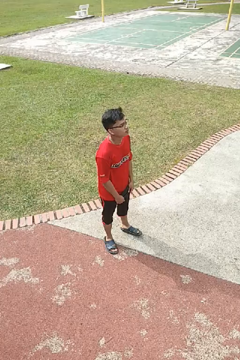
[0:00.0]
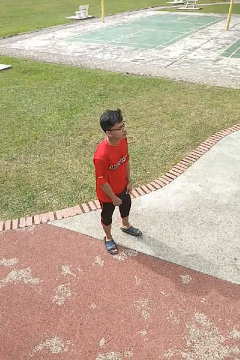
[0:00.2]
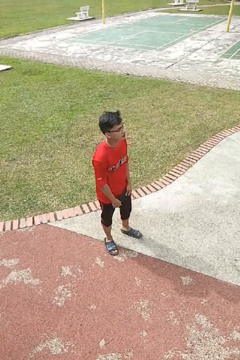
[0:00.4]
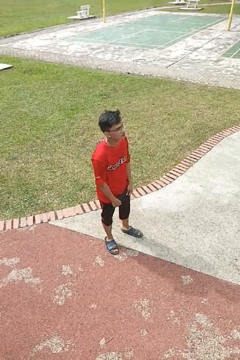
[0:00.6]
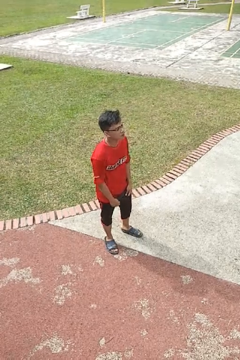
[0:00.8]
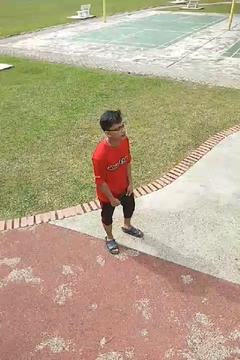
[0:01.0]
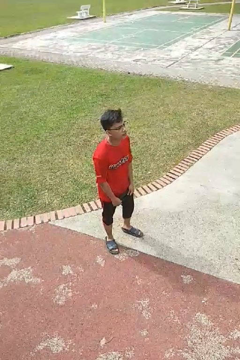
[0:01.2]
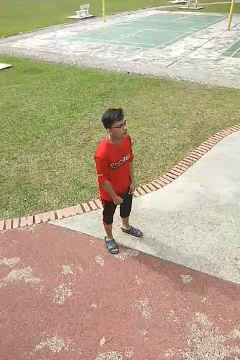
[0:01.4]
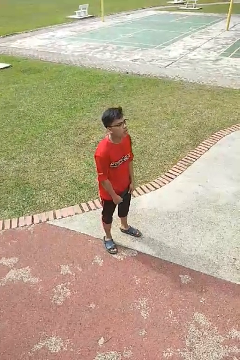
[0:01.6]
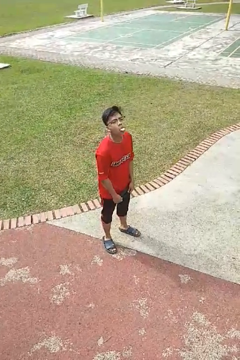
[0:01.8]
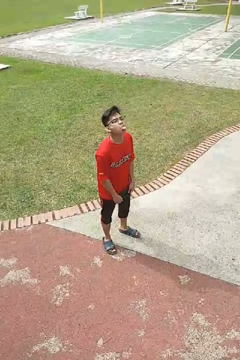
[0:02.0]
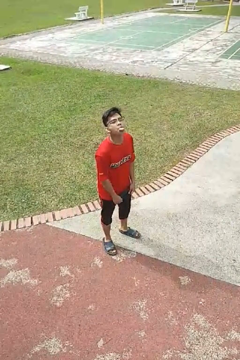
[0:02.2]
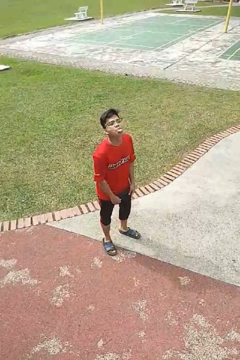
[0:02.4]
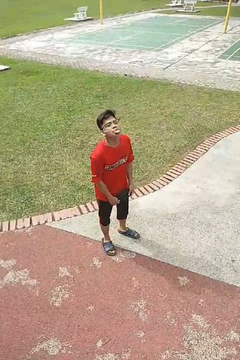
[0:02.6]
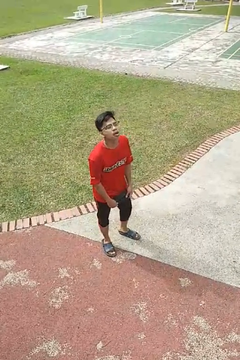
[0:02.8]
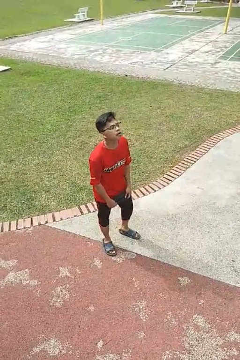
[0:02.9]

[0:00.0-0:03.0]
person sticks out tongue

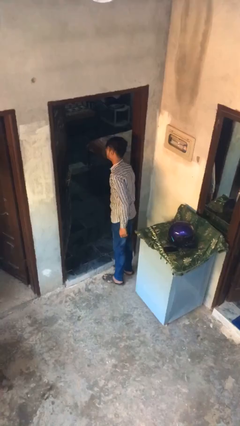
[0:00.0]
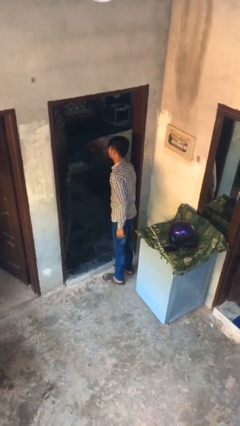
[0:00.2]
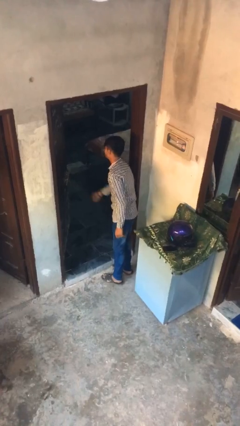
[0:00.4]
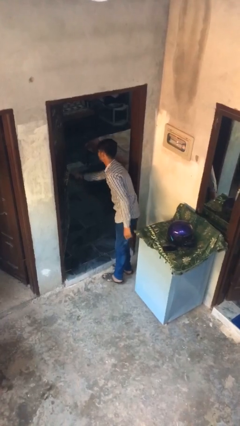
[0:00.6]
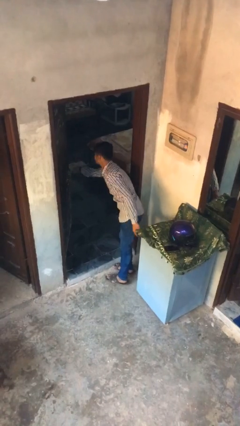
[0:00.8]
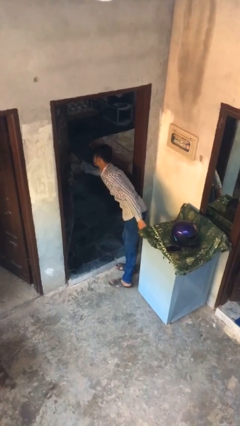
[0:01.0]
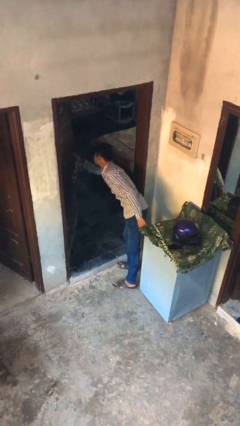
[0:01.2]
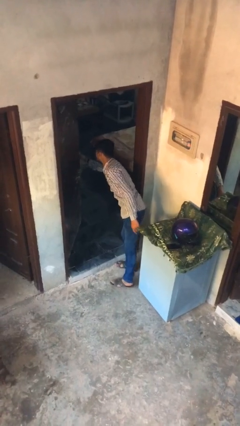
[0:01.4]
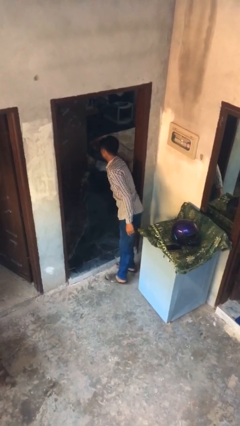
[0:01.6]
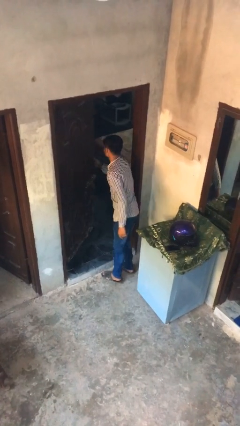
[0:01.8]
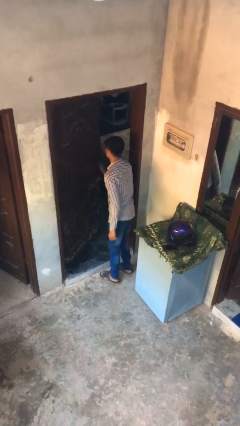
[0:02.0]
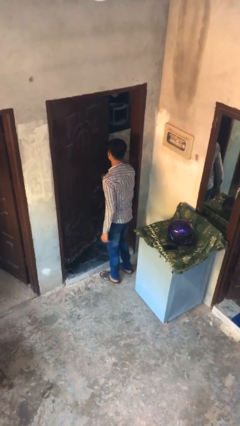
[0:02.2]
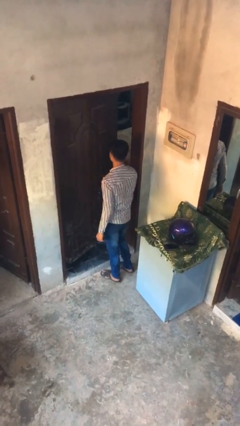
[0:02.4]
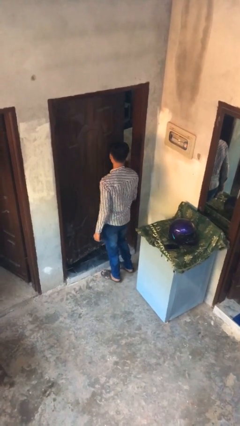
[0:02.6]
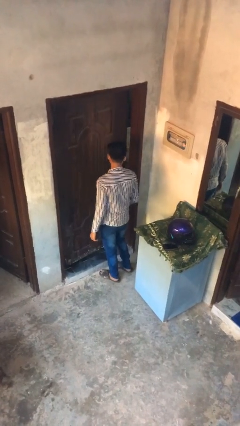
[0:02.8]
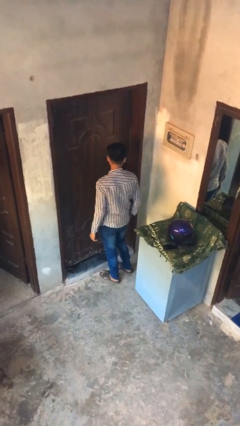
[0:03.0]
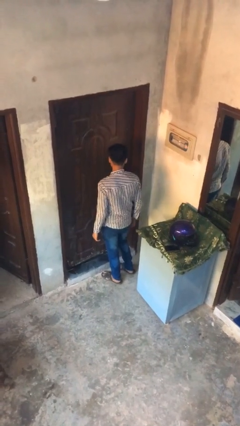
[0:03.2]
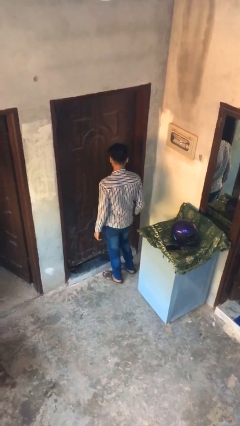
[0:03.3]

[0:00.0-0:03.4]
person closes facility door

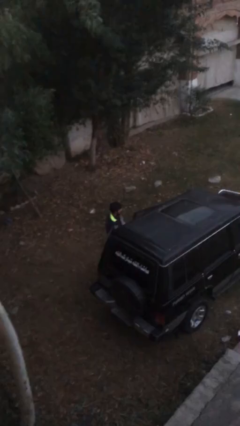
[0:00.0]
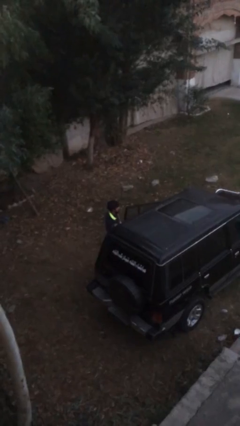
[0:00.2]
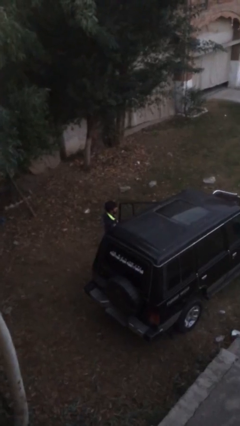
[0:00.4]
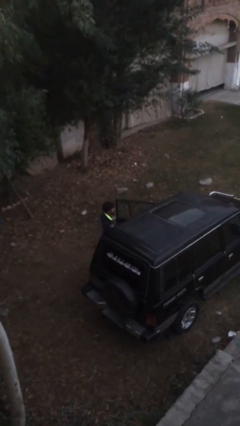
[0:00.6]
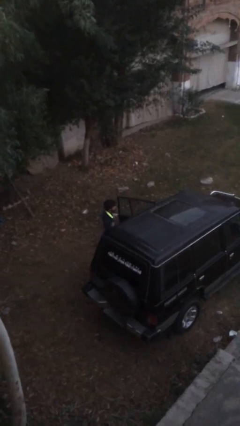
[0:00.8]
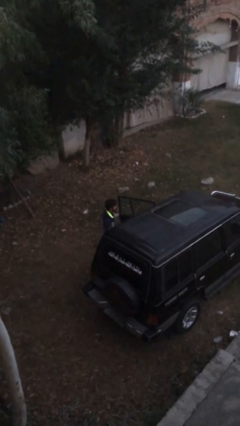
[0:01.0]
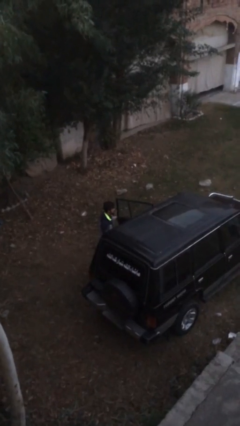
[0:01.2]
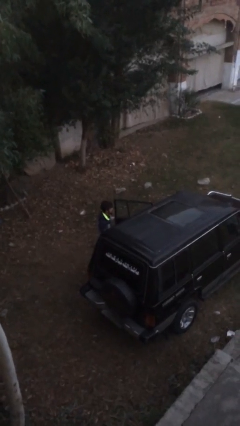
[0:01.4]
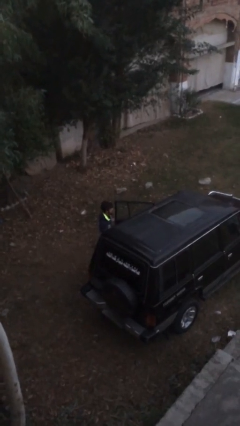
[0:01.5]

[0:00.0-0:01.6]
person opens car door

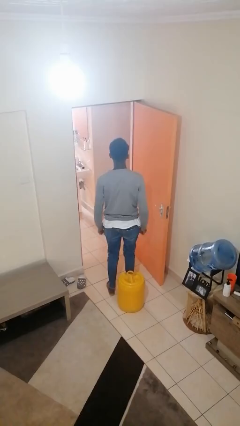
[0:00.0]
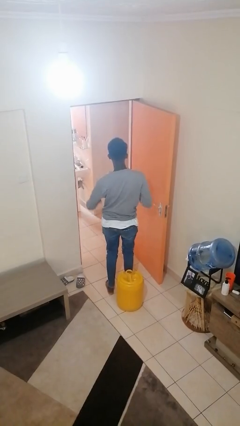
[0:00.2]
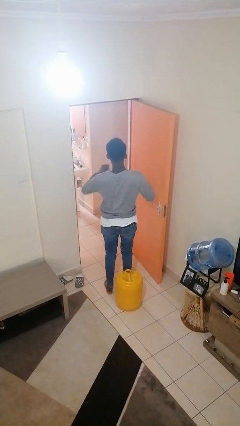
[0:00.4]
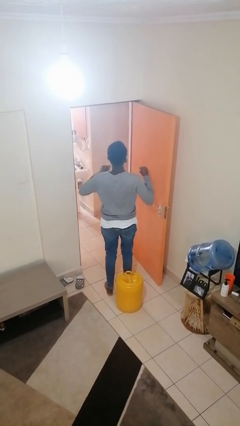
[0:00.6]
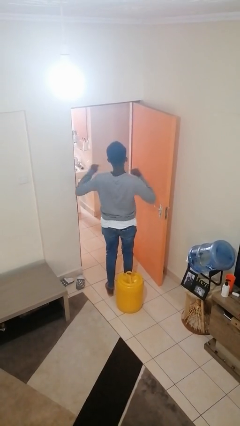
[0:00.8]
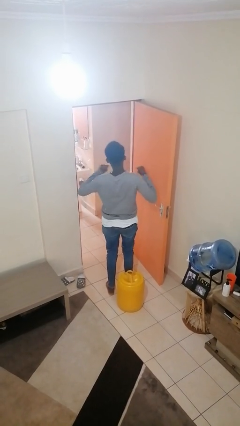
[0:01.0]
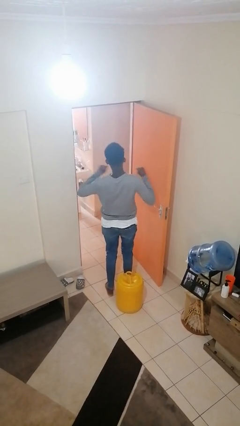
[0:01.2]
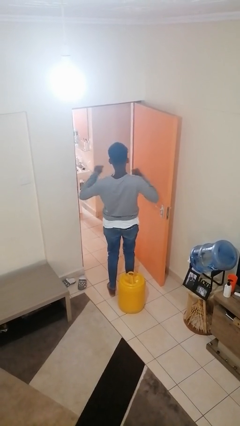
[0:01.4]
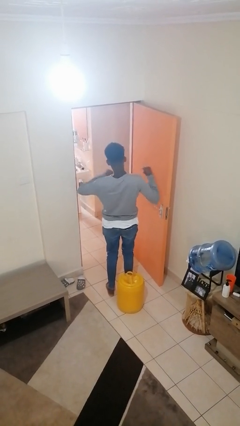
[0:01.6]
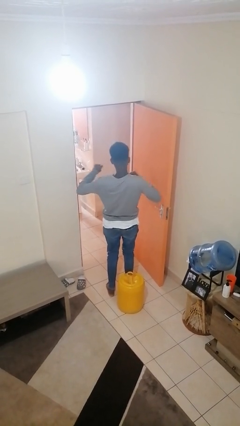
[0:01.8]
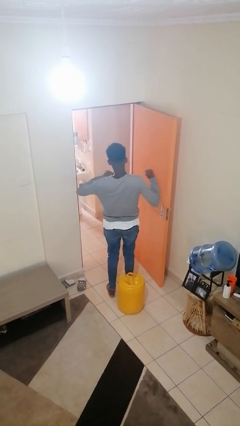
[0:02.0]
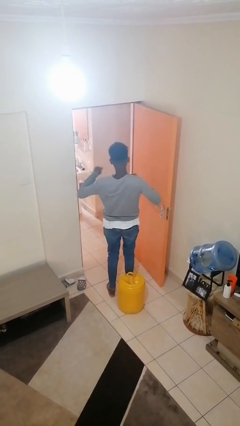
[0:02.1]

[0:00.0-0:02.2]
person drums on chest

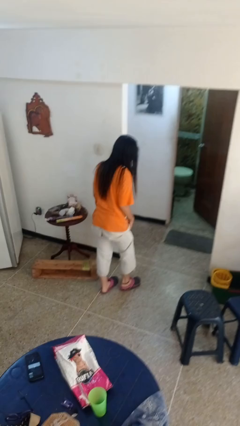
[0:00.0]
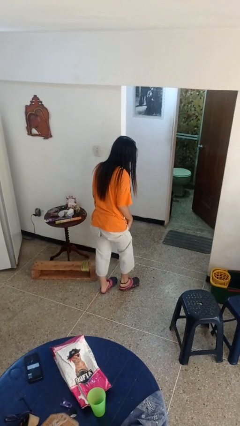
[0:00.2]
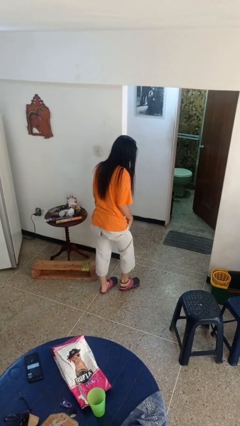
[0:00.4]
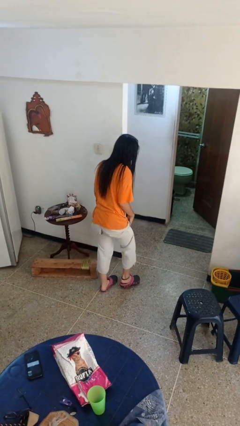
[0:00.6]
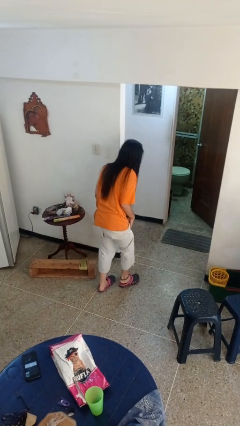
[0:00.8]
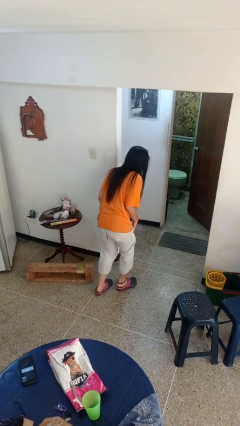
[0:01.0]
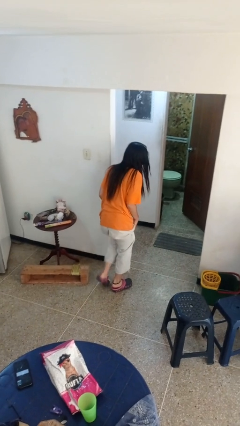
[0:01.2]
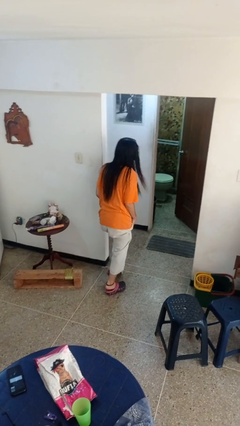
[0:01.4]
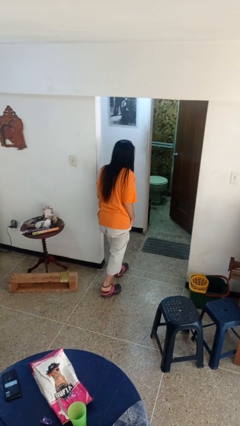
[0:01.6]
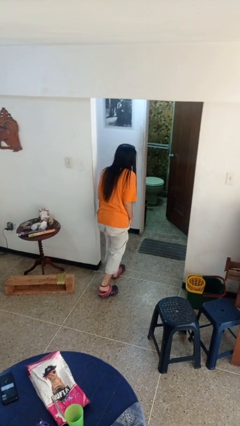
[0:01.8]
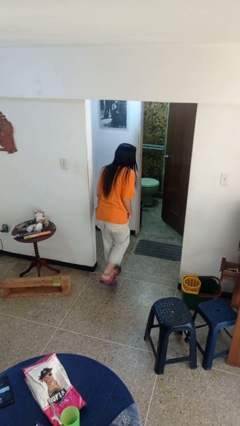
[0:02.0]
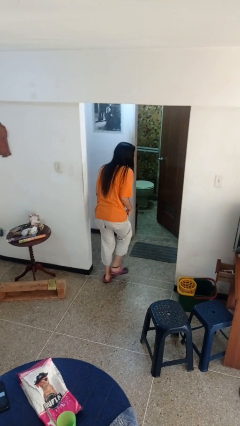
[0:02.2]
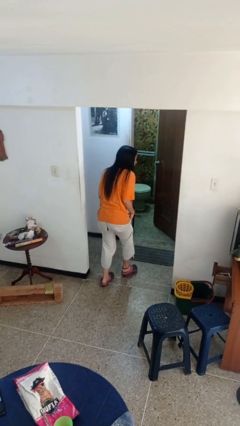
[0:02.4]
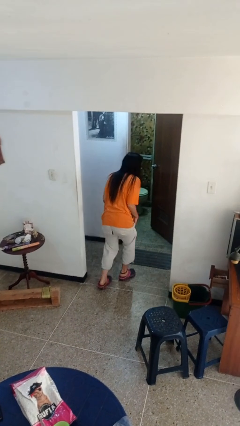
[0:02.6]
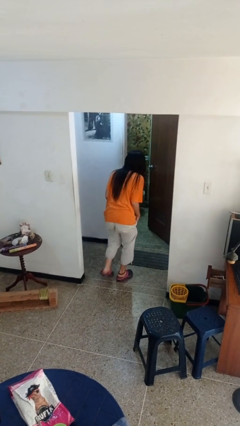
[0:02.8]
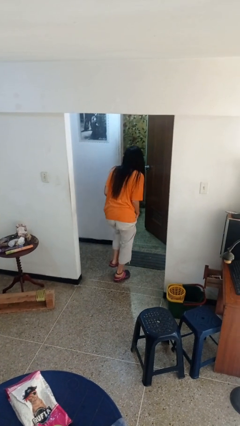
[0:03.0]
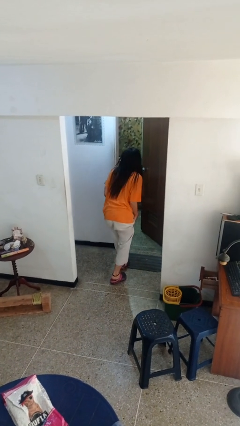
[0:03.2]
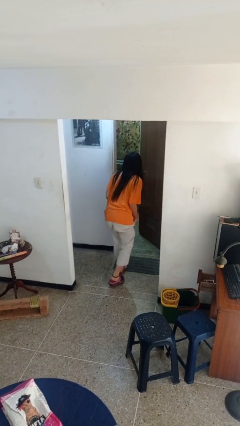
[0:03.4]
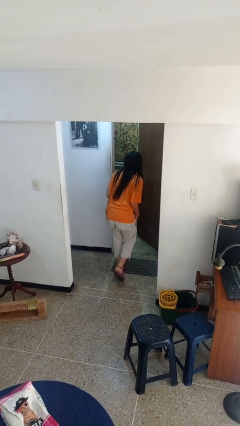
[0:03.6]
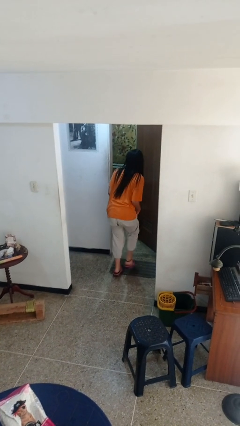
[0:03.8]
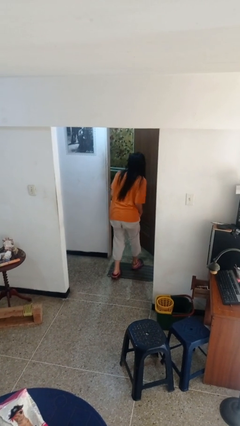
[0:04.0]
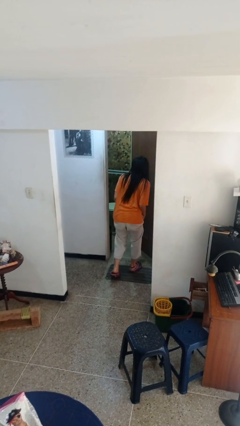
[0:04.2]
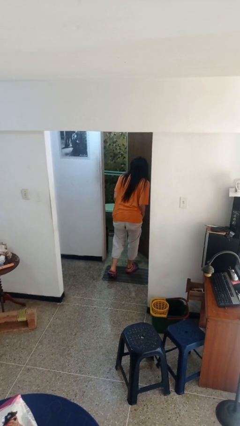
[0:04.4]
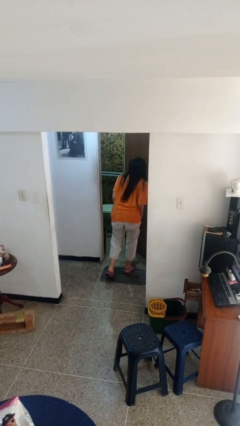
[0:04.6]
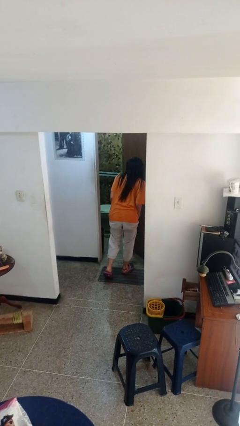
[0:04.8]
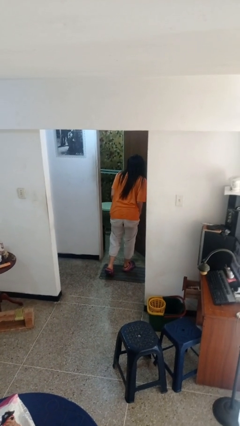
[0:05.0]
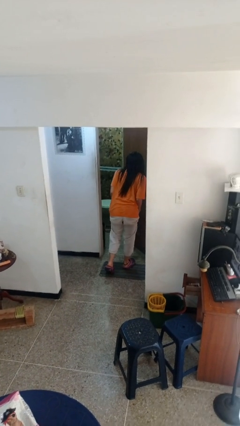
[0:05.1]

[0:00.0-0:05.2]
person walks tiptoe

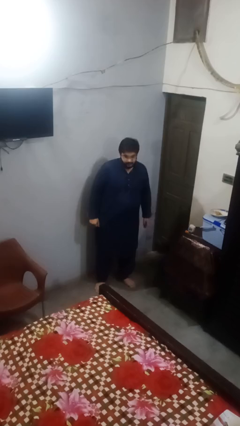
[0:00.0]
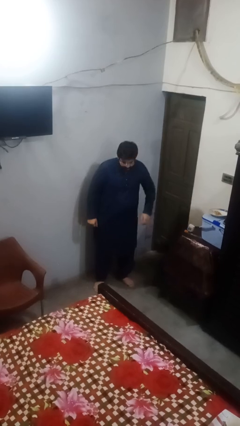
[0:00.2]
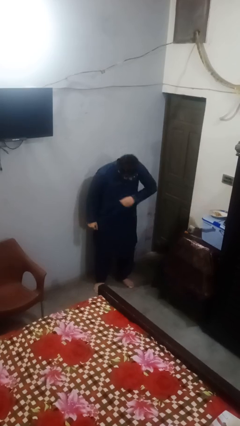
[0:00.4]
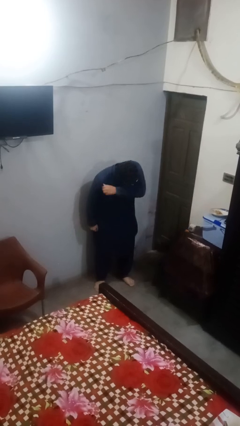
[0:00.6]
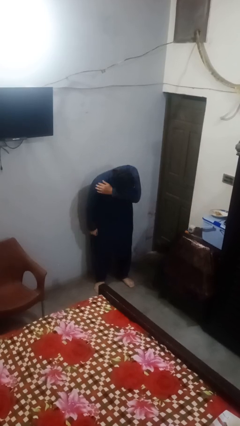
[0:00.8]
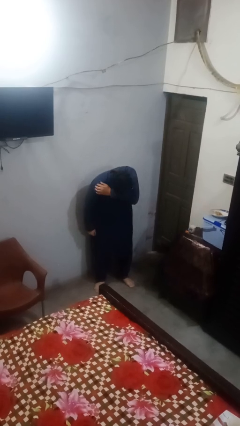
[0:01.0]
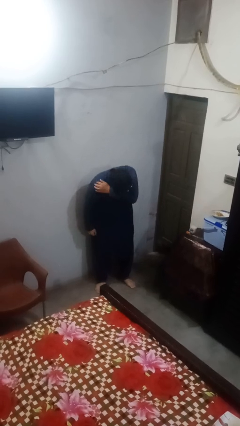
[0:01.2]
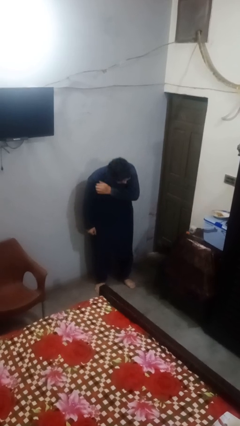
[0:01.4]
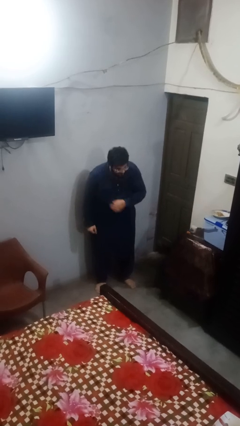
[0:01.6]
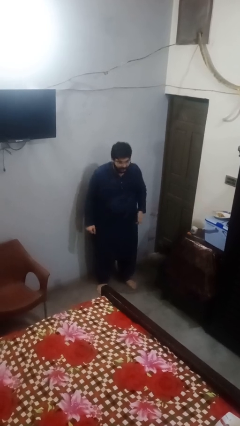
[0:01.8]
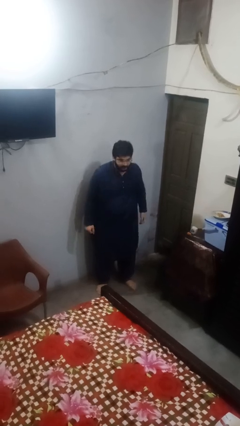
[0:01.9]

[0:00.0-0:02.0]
person sneezes into arm

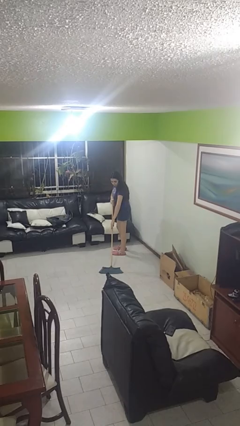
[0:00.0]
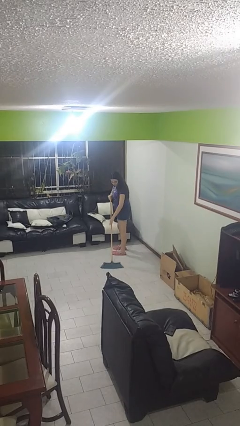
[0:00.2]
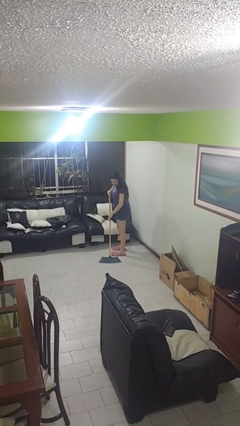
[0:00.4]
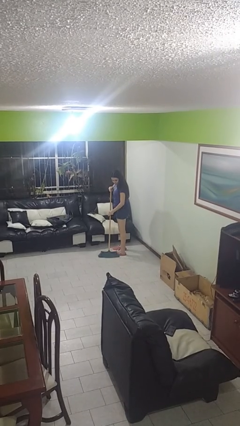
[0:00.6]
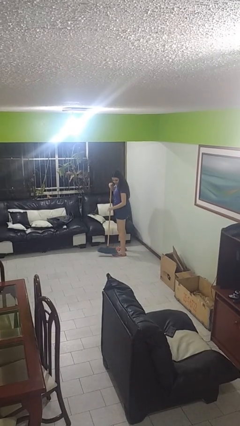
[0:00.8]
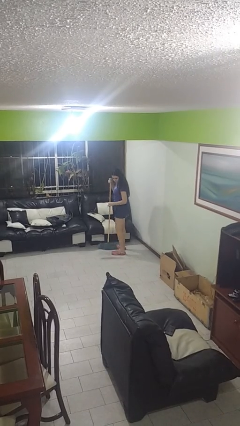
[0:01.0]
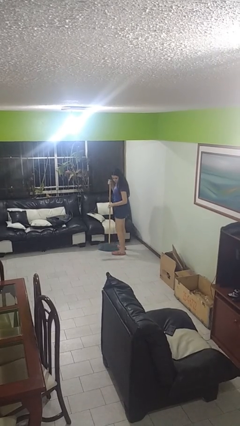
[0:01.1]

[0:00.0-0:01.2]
person sweeps floor
